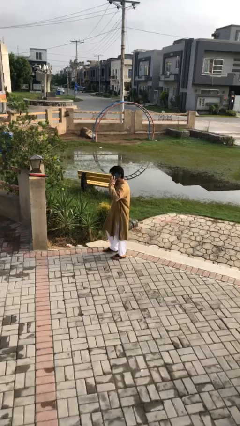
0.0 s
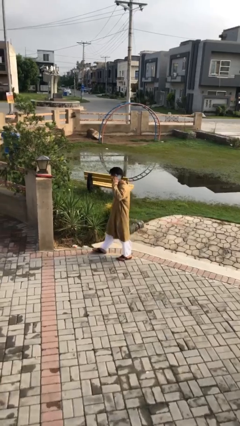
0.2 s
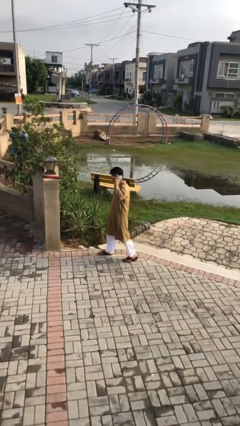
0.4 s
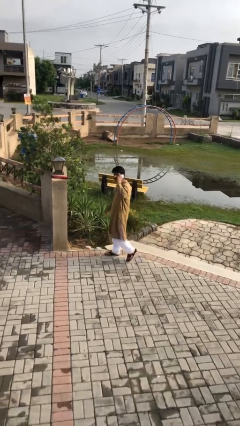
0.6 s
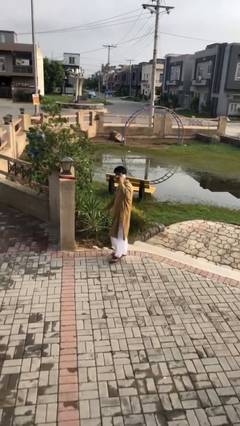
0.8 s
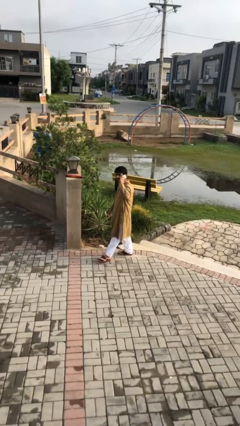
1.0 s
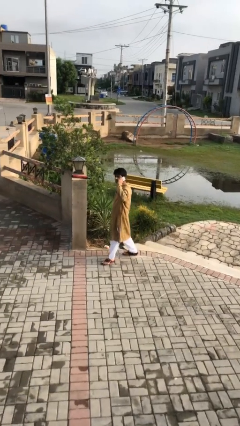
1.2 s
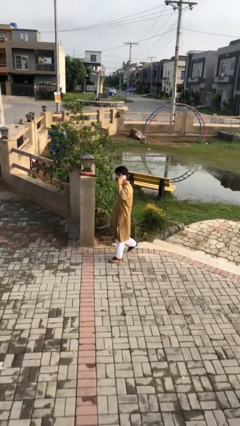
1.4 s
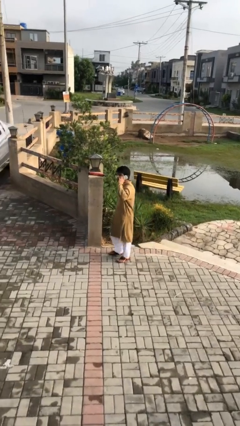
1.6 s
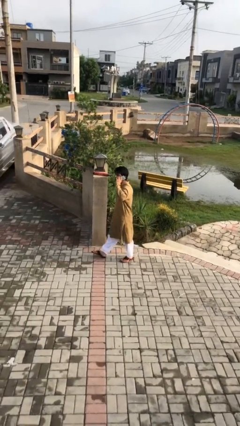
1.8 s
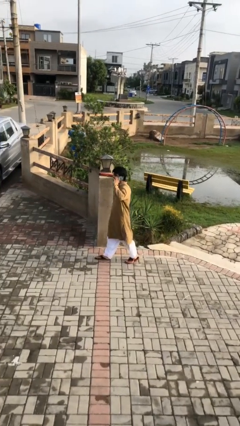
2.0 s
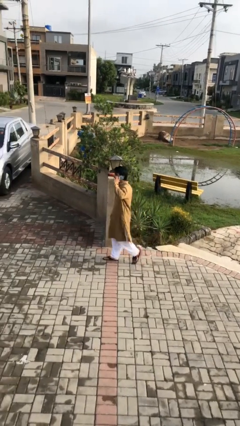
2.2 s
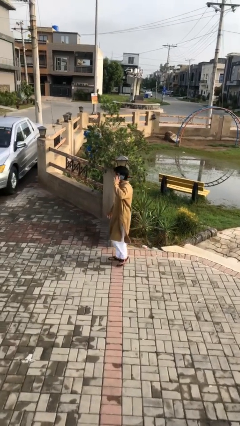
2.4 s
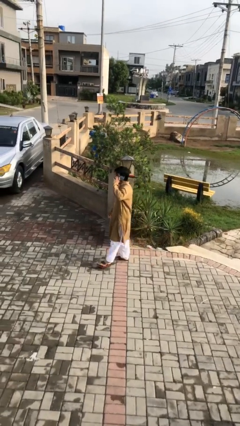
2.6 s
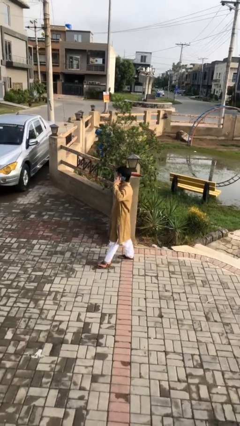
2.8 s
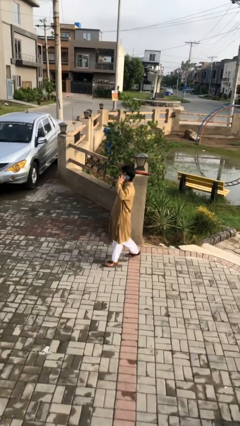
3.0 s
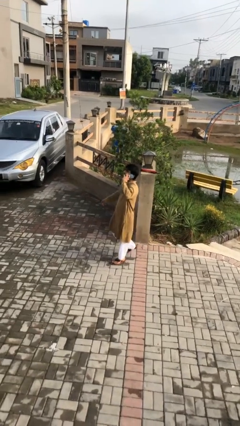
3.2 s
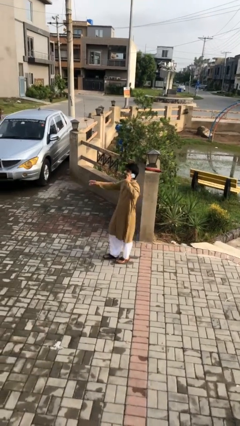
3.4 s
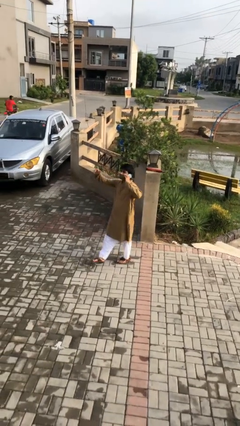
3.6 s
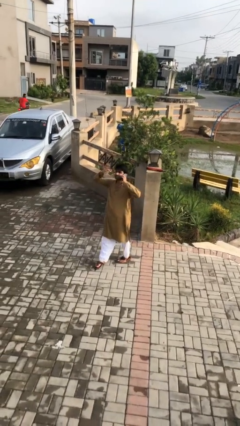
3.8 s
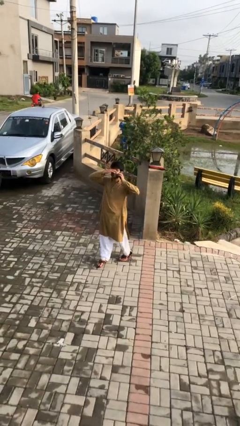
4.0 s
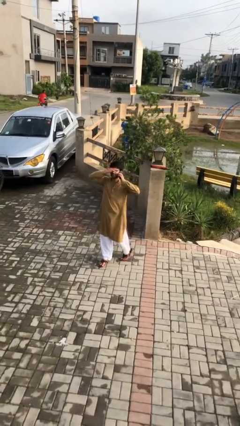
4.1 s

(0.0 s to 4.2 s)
person talks on phone

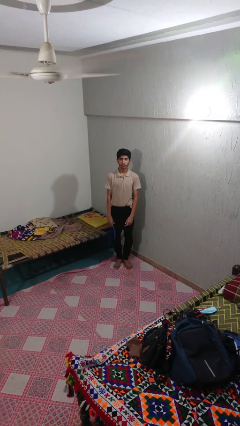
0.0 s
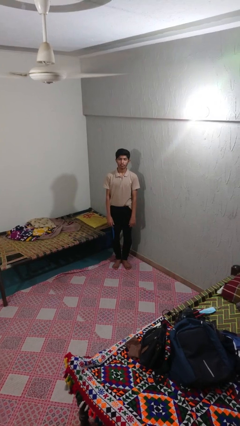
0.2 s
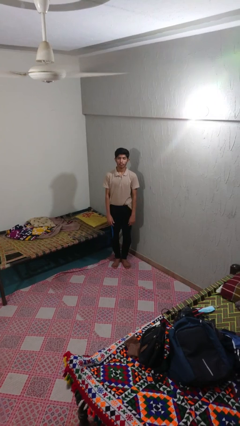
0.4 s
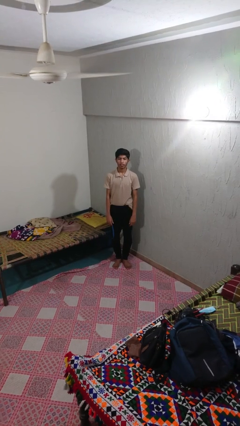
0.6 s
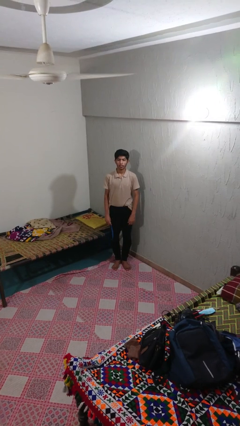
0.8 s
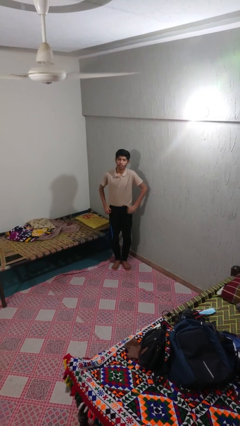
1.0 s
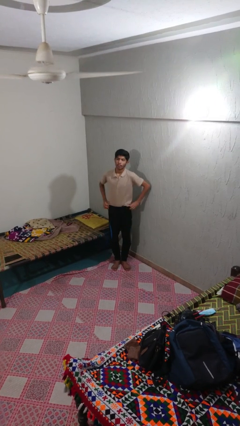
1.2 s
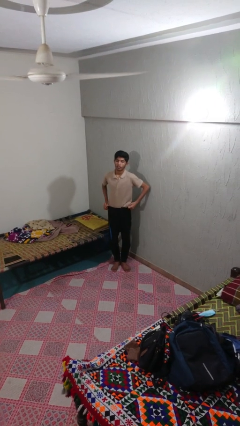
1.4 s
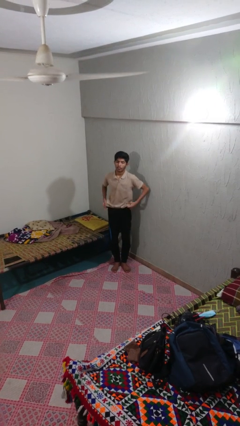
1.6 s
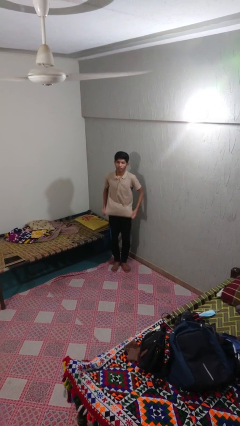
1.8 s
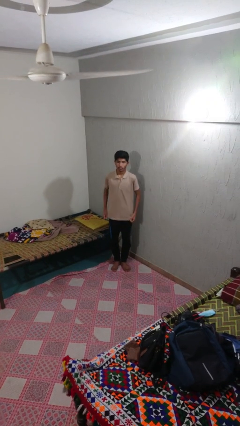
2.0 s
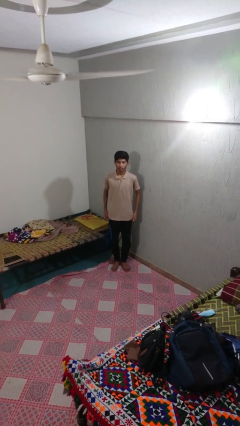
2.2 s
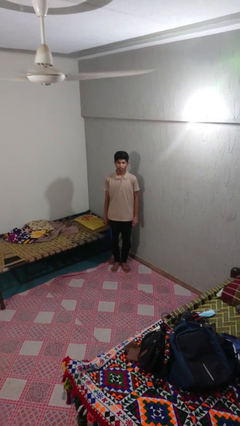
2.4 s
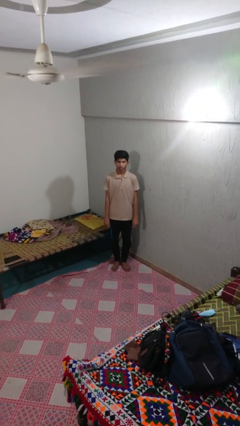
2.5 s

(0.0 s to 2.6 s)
person untucks shirt

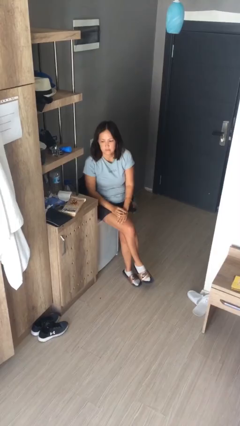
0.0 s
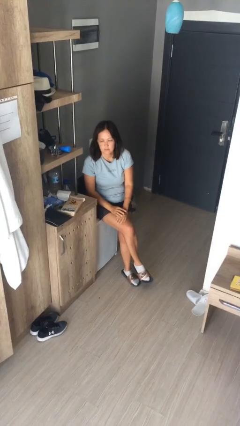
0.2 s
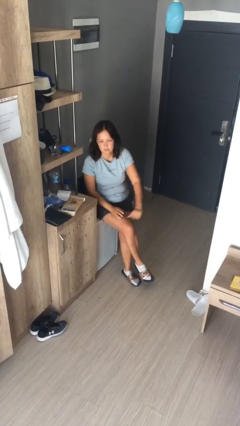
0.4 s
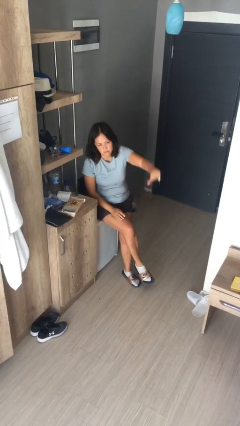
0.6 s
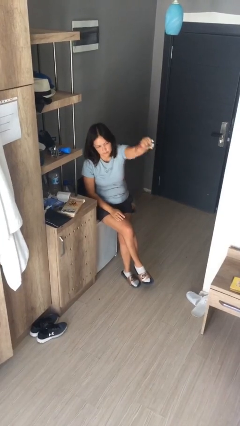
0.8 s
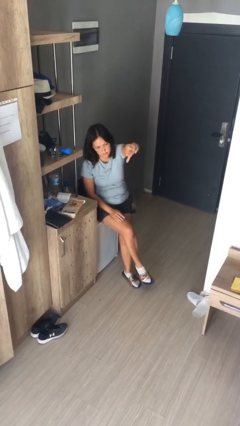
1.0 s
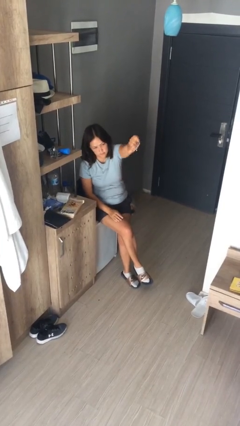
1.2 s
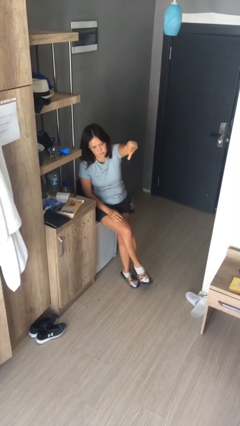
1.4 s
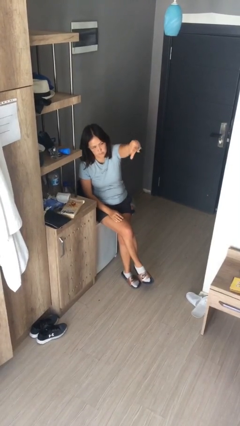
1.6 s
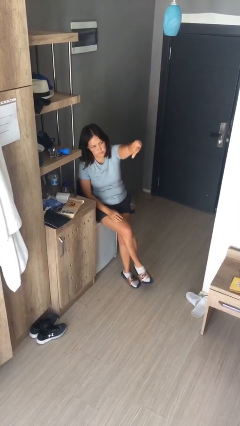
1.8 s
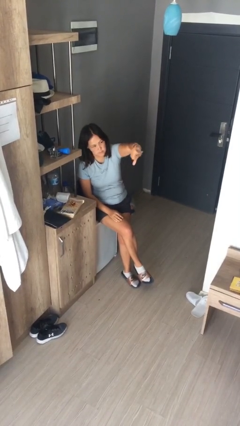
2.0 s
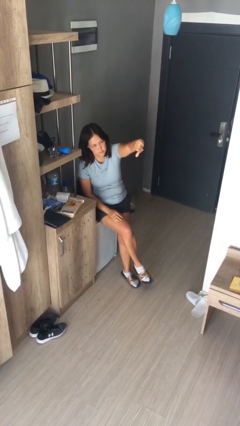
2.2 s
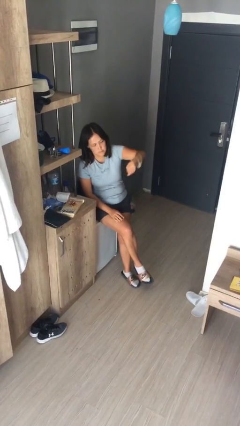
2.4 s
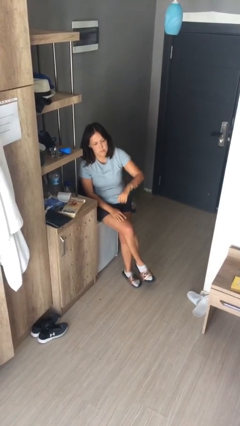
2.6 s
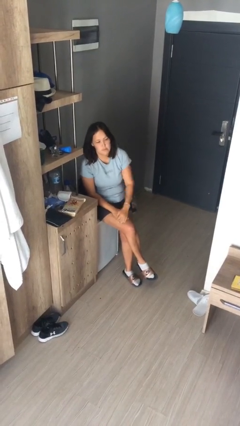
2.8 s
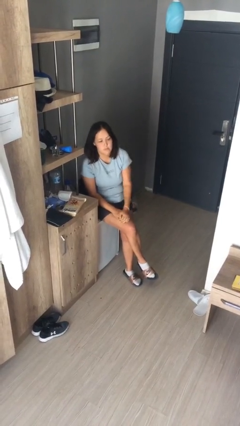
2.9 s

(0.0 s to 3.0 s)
person gestures thumbs down

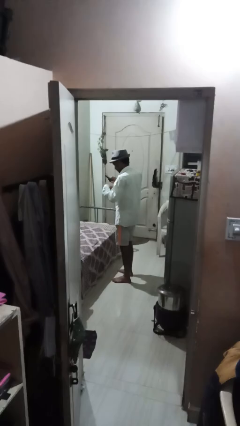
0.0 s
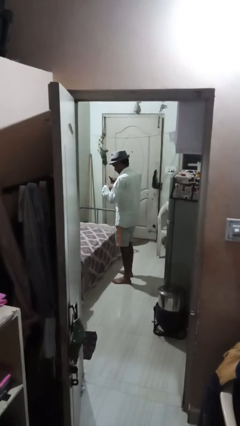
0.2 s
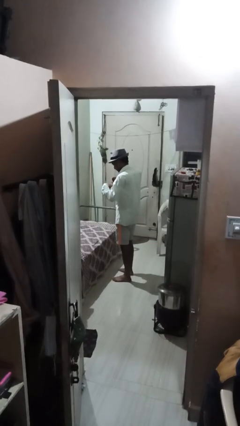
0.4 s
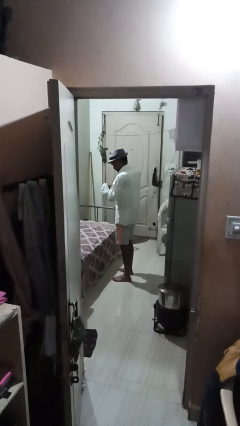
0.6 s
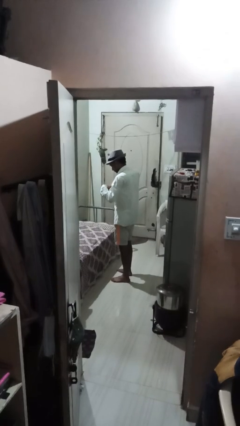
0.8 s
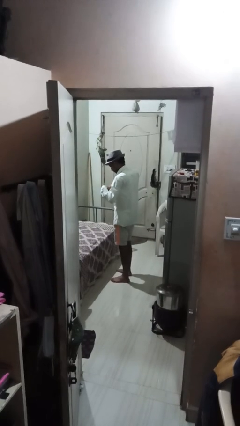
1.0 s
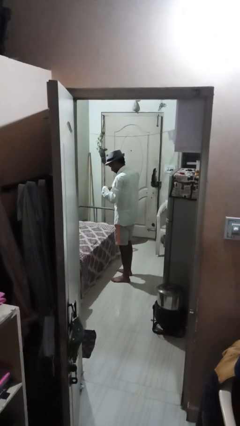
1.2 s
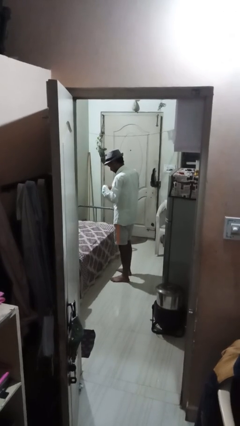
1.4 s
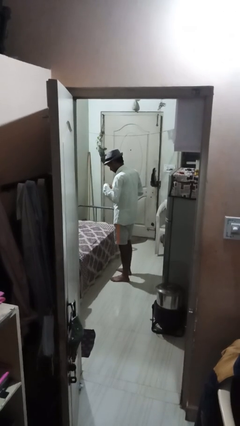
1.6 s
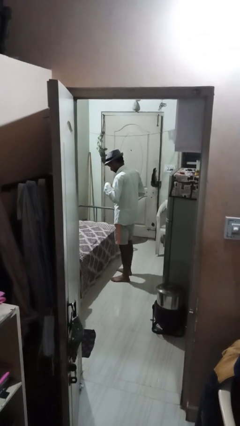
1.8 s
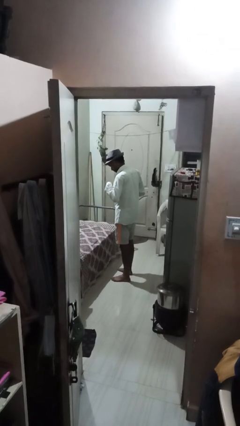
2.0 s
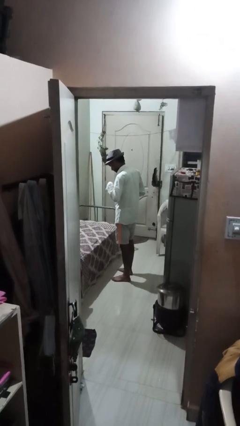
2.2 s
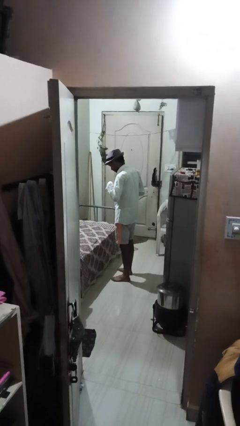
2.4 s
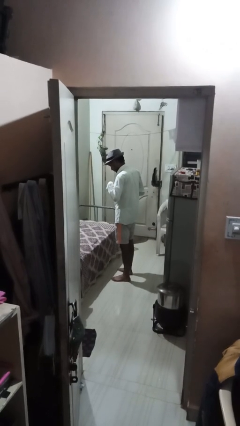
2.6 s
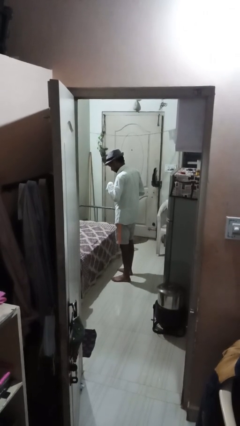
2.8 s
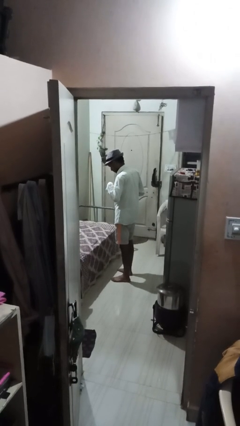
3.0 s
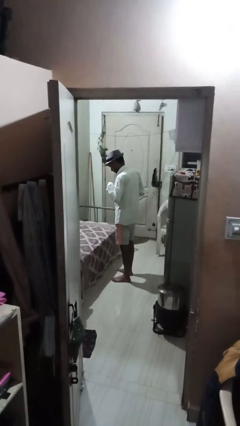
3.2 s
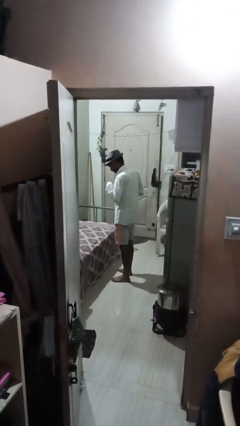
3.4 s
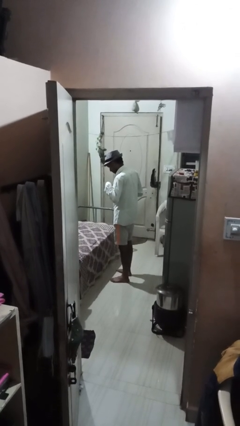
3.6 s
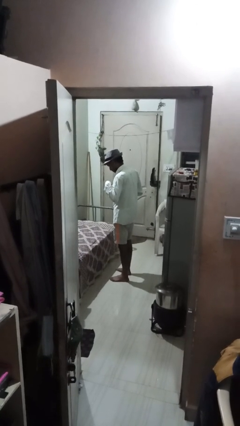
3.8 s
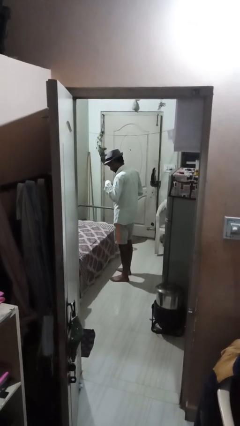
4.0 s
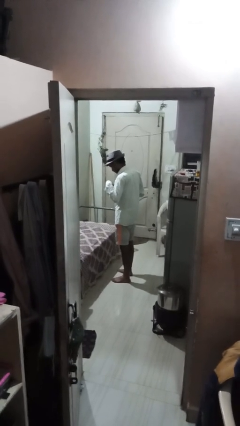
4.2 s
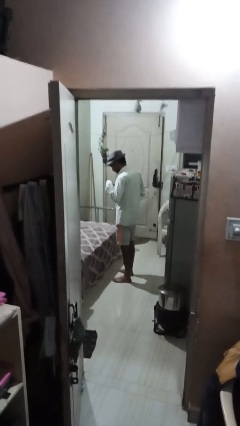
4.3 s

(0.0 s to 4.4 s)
person puts phone into pocket

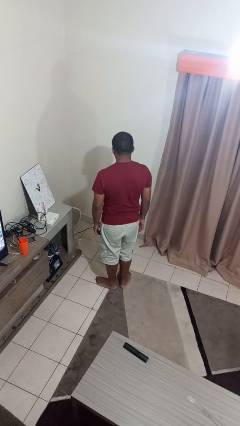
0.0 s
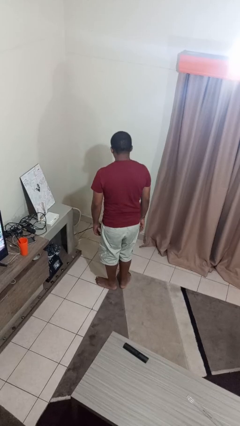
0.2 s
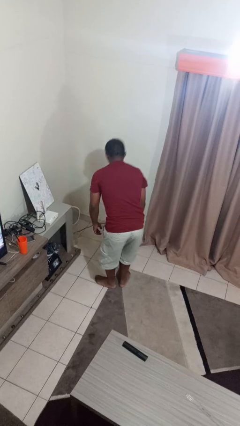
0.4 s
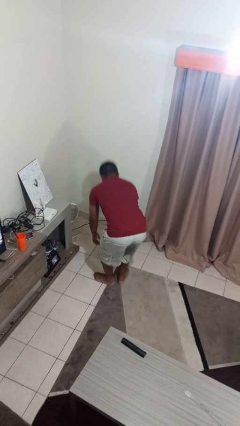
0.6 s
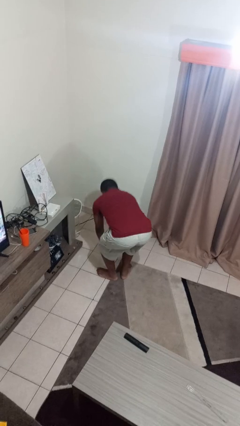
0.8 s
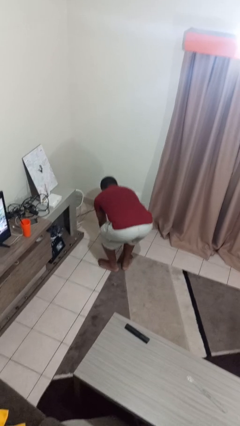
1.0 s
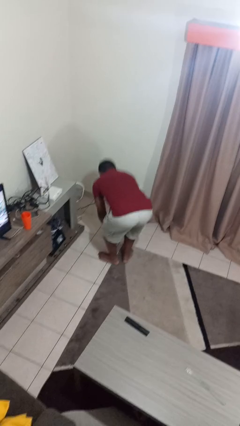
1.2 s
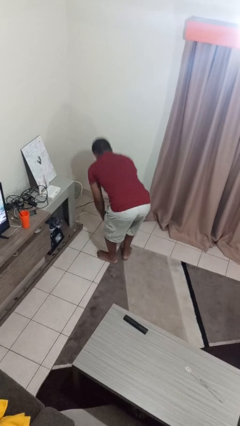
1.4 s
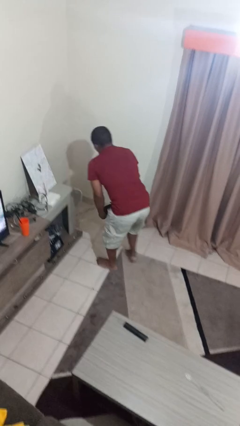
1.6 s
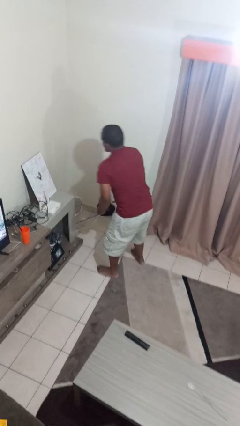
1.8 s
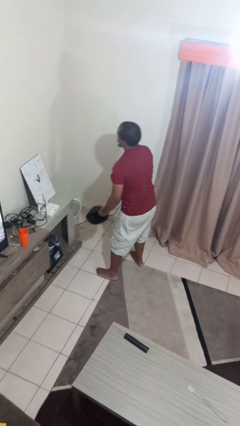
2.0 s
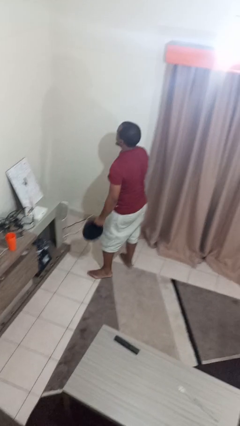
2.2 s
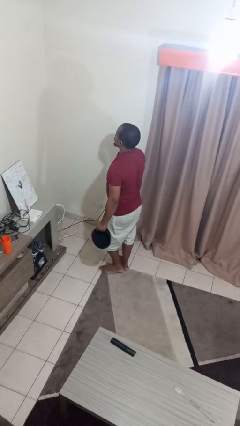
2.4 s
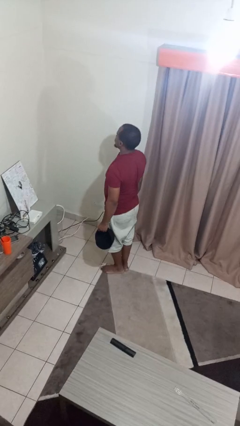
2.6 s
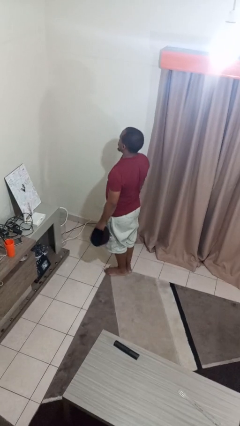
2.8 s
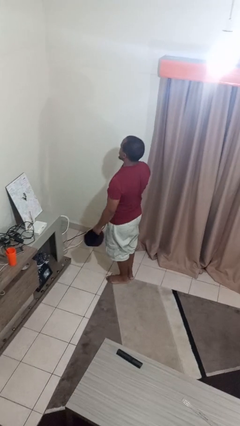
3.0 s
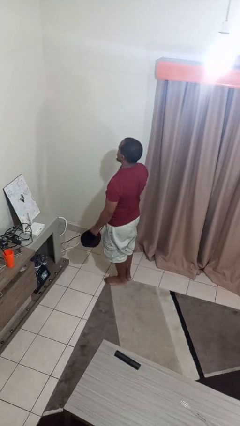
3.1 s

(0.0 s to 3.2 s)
person picks up object from floor
